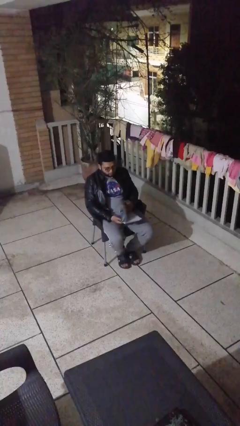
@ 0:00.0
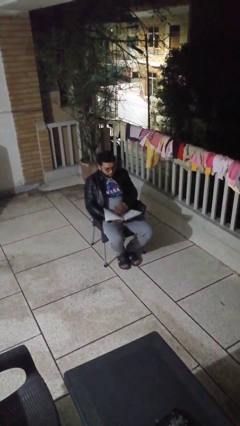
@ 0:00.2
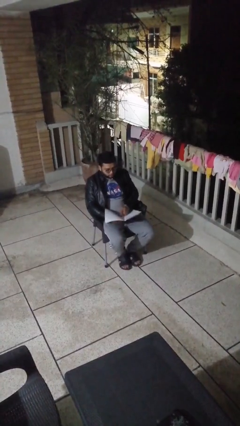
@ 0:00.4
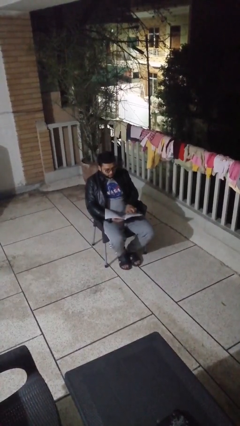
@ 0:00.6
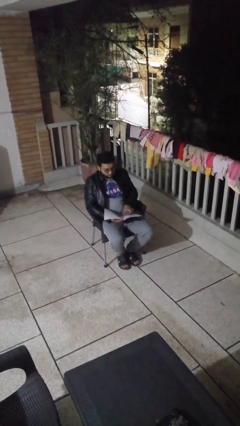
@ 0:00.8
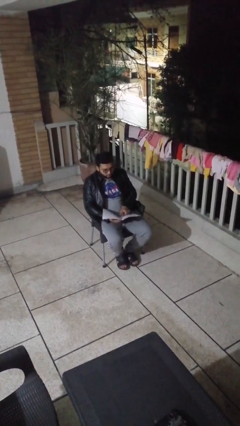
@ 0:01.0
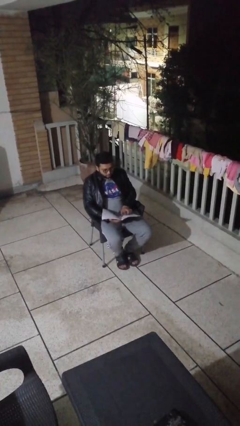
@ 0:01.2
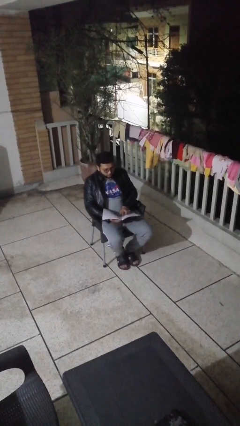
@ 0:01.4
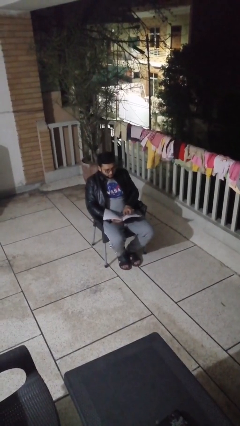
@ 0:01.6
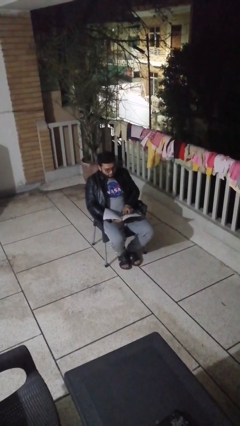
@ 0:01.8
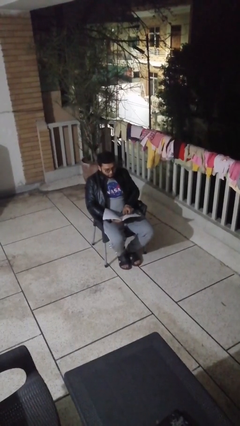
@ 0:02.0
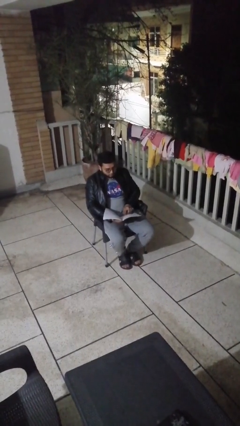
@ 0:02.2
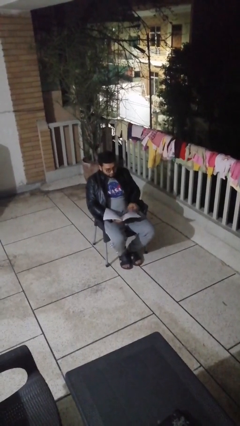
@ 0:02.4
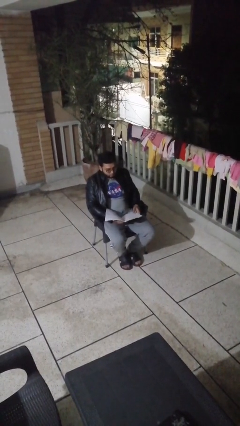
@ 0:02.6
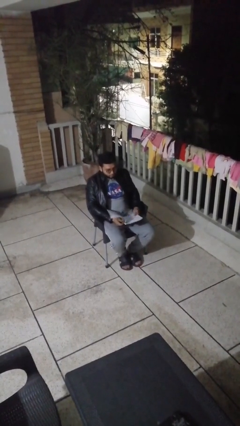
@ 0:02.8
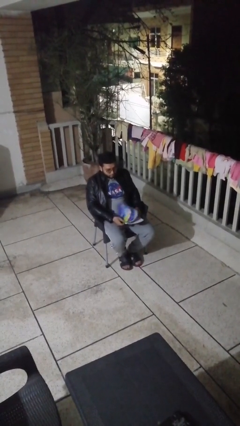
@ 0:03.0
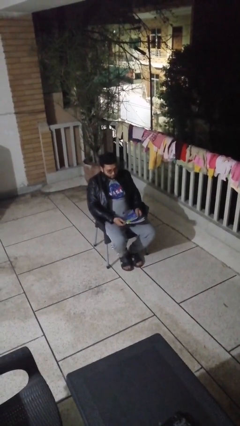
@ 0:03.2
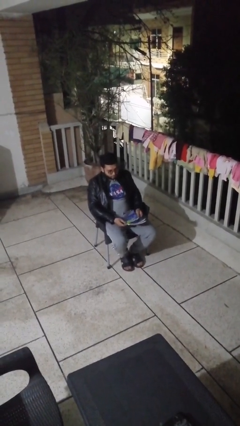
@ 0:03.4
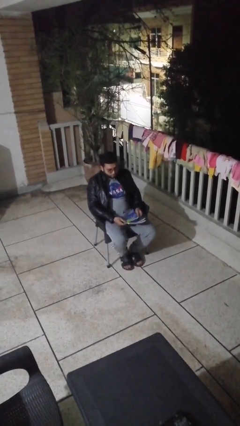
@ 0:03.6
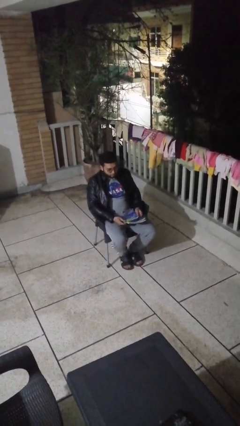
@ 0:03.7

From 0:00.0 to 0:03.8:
person reads document

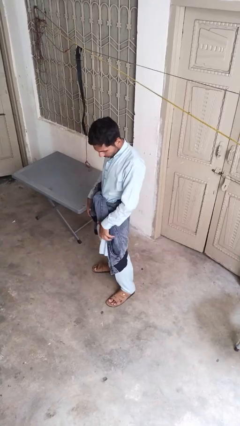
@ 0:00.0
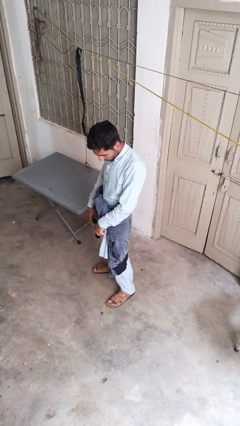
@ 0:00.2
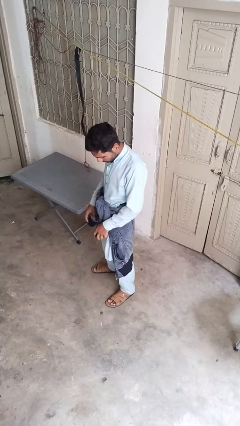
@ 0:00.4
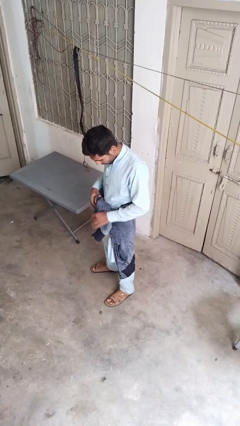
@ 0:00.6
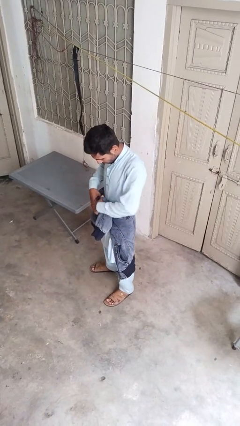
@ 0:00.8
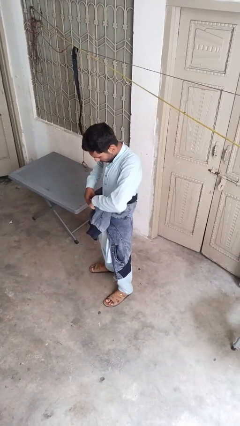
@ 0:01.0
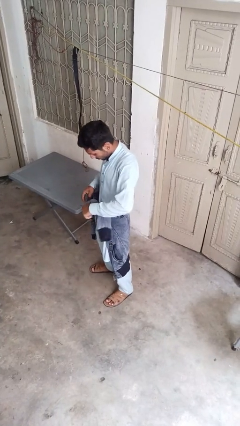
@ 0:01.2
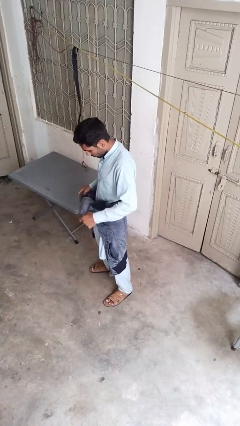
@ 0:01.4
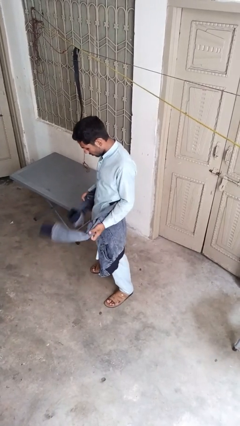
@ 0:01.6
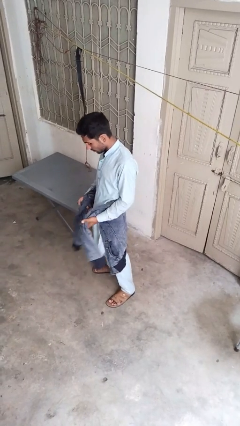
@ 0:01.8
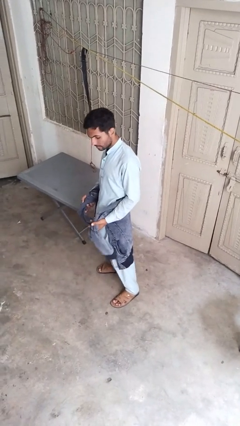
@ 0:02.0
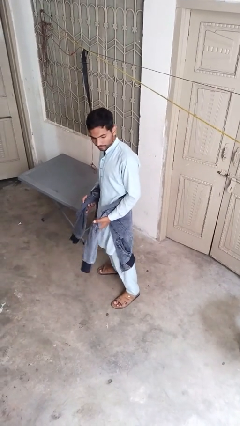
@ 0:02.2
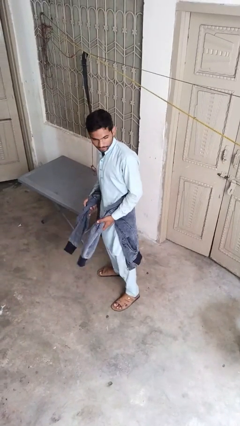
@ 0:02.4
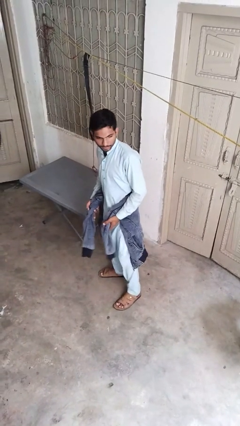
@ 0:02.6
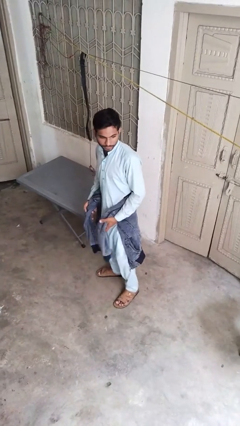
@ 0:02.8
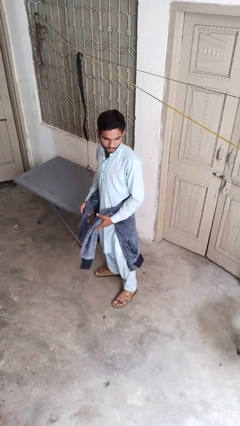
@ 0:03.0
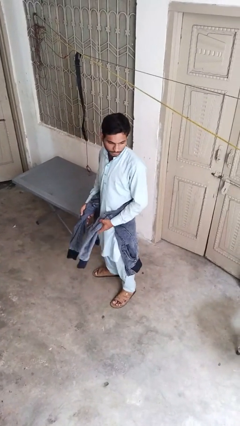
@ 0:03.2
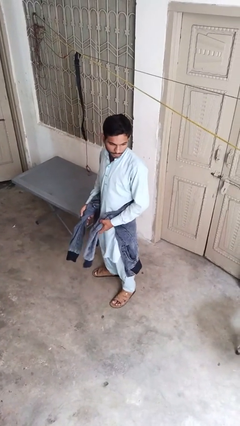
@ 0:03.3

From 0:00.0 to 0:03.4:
person unties jacket around waist

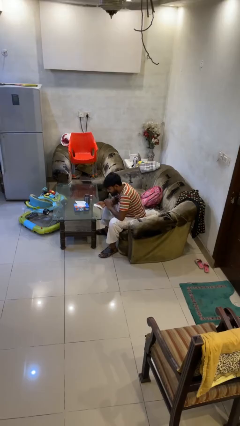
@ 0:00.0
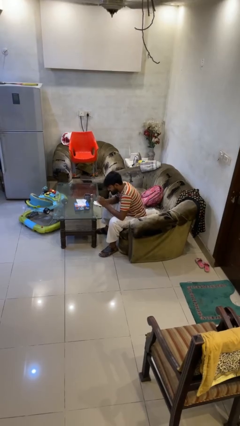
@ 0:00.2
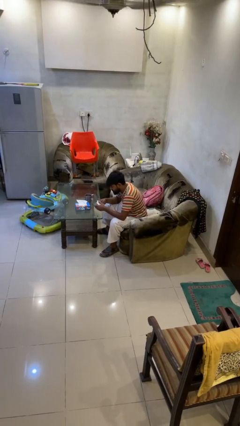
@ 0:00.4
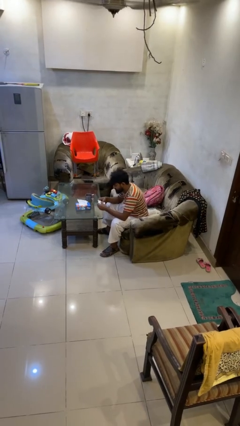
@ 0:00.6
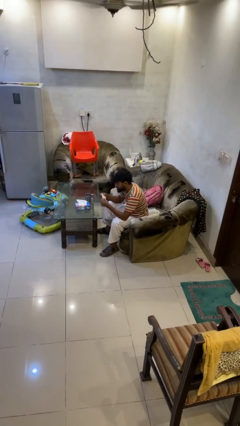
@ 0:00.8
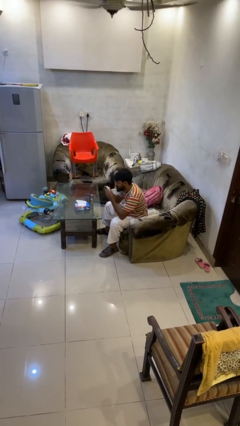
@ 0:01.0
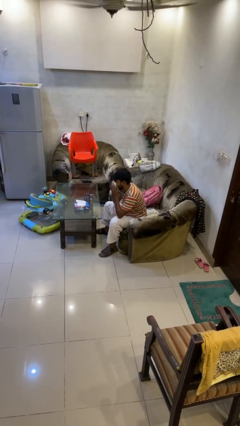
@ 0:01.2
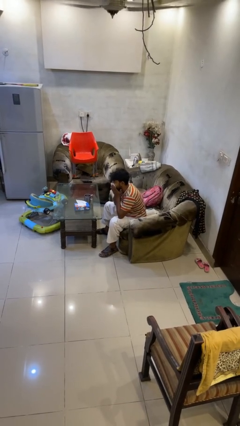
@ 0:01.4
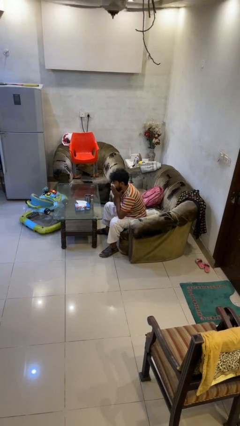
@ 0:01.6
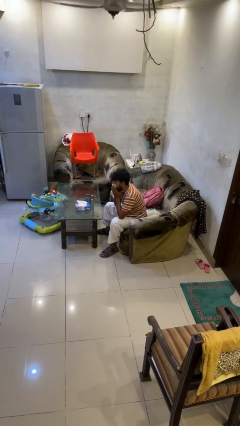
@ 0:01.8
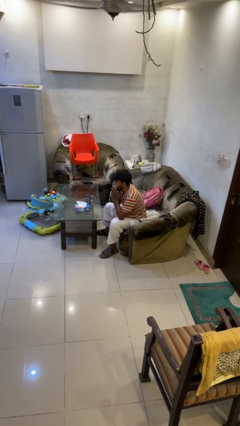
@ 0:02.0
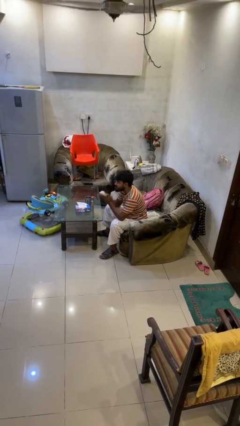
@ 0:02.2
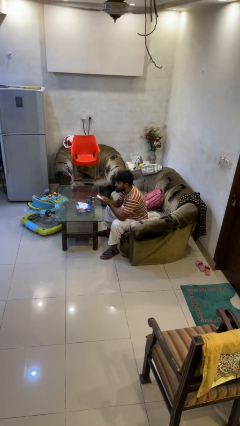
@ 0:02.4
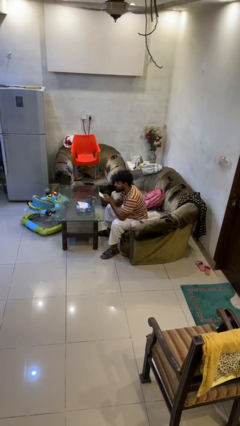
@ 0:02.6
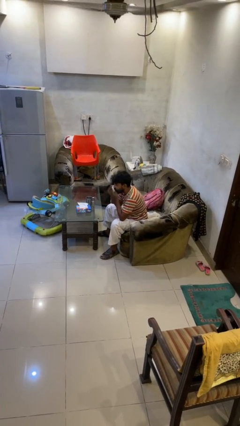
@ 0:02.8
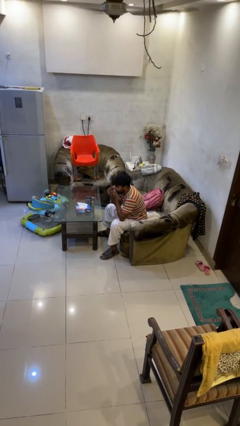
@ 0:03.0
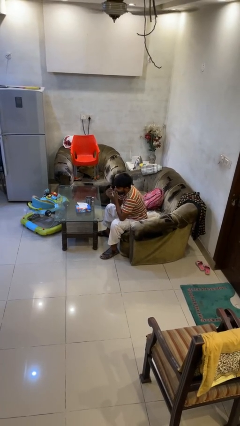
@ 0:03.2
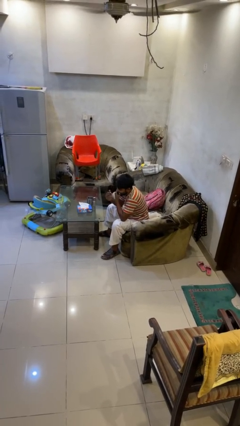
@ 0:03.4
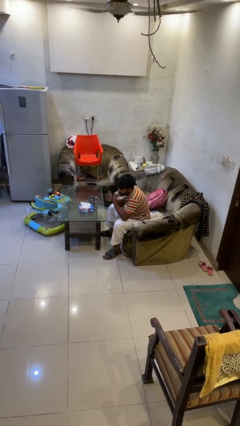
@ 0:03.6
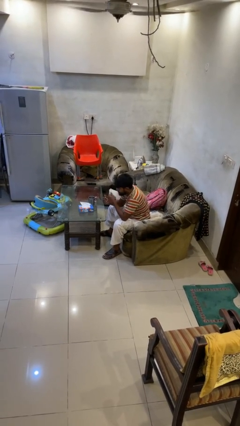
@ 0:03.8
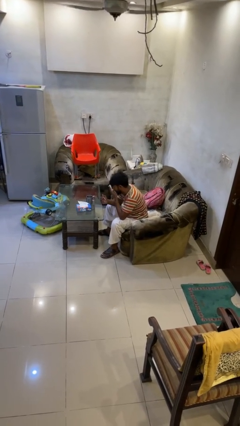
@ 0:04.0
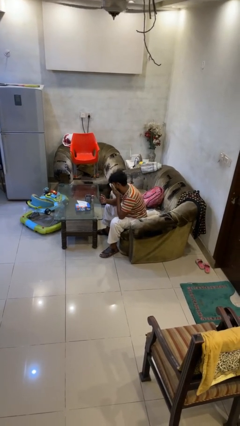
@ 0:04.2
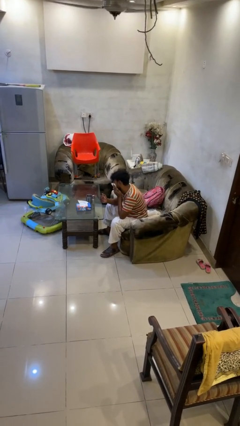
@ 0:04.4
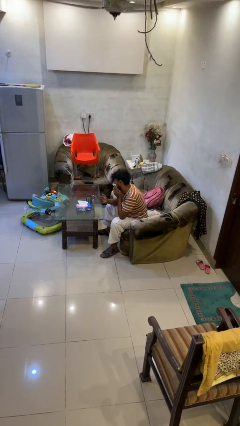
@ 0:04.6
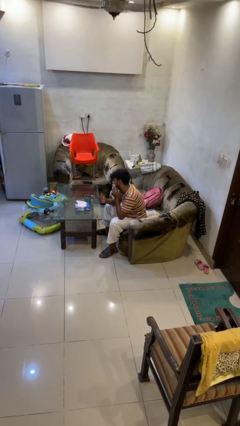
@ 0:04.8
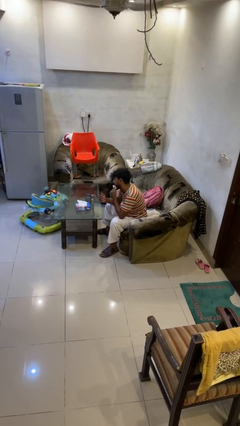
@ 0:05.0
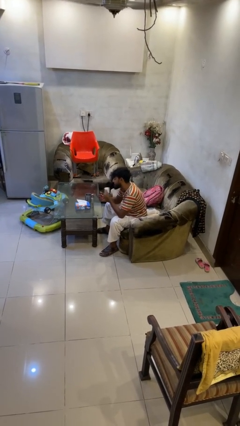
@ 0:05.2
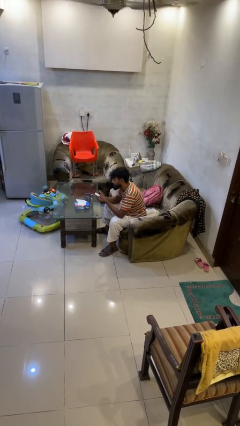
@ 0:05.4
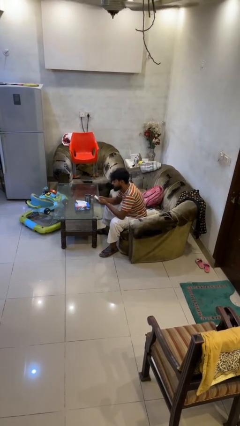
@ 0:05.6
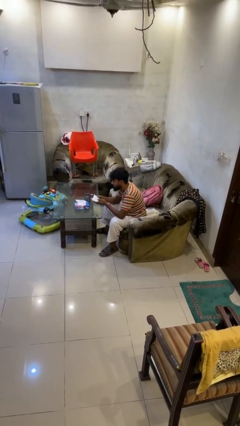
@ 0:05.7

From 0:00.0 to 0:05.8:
person wipes mouth with napkin

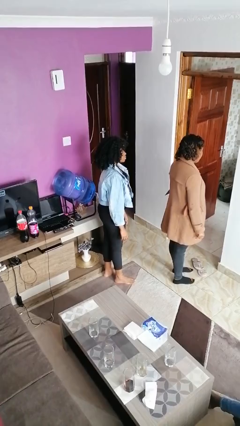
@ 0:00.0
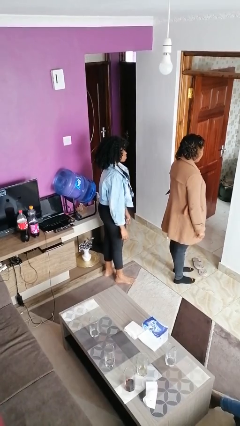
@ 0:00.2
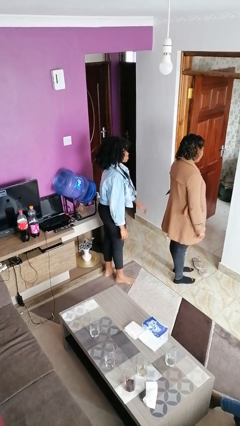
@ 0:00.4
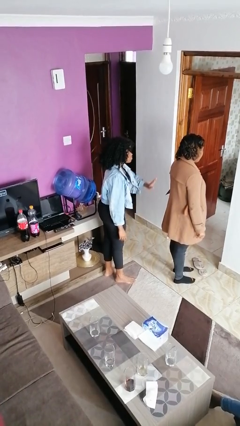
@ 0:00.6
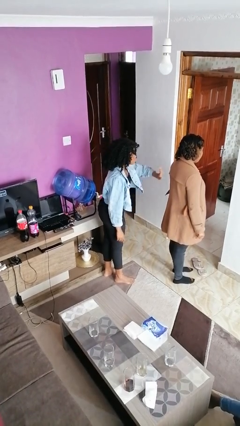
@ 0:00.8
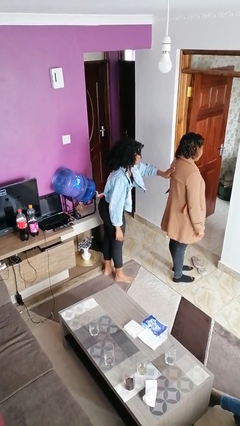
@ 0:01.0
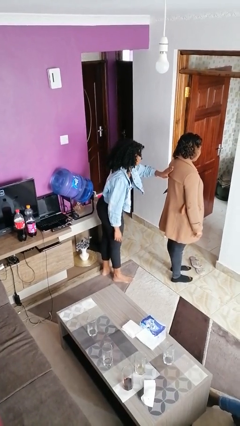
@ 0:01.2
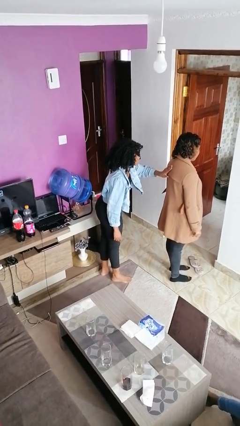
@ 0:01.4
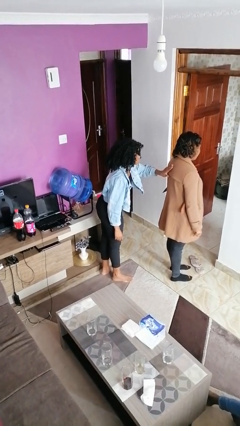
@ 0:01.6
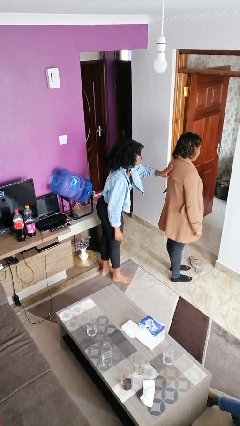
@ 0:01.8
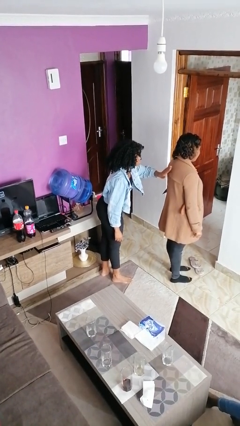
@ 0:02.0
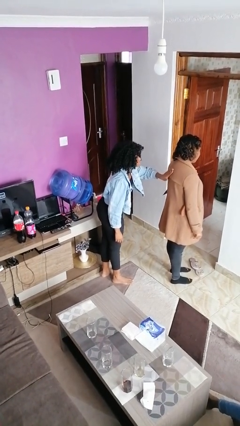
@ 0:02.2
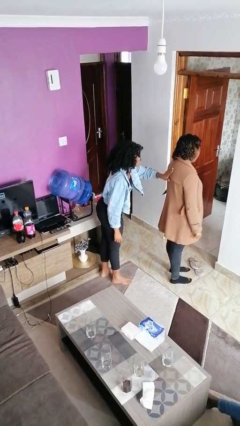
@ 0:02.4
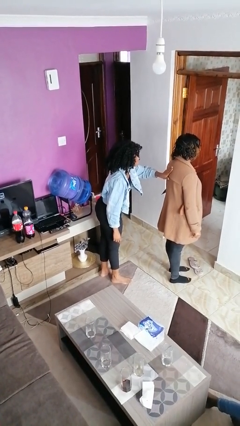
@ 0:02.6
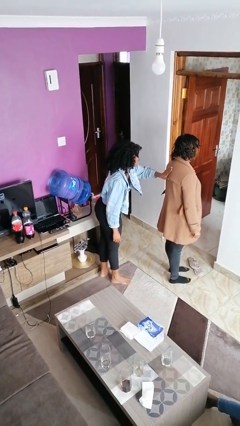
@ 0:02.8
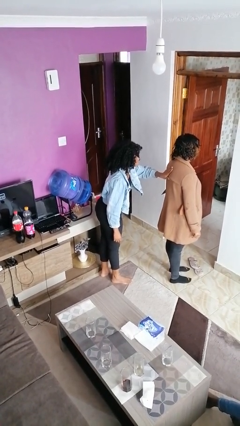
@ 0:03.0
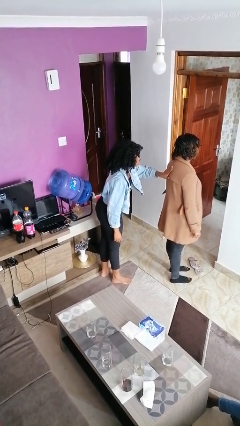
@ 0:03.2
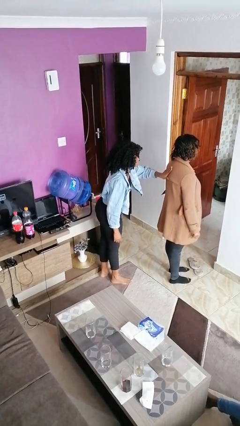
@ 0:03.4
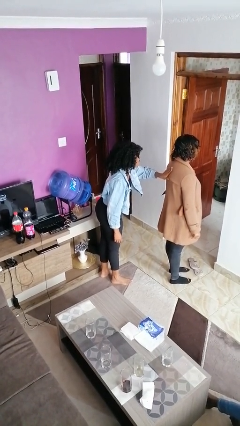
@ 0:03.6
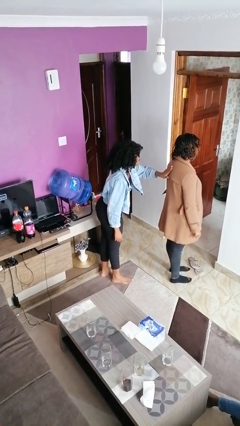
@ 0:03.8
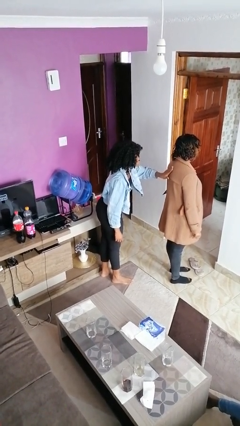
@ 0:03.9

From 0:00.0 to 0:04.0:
person touches back of person

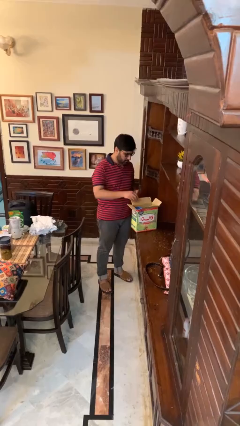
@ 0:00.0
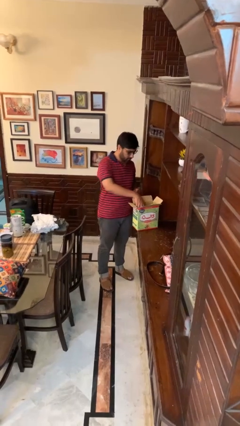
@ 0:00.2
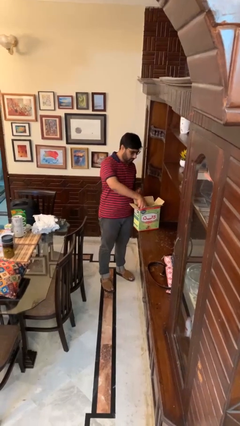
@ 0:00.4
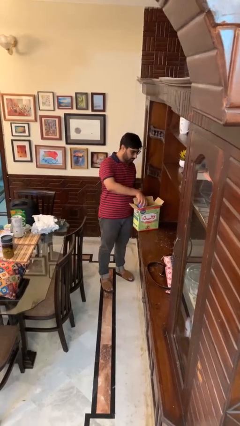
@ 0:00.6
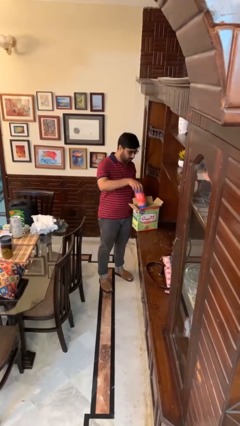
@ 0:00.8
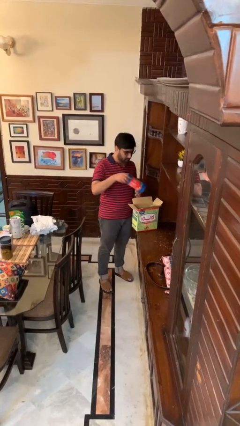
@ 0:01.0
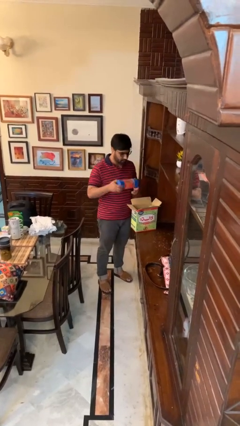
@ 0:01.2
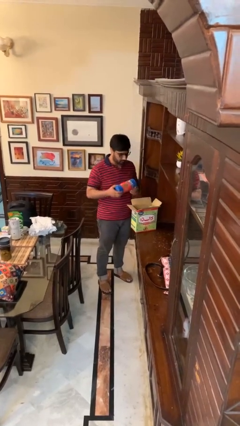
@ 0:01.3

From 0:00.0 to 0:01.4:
person takes object from box
